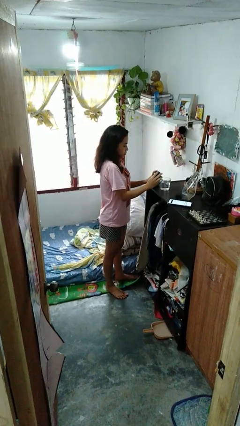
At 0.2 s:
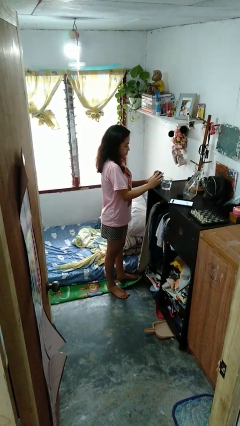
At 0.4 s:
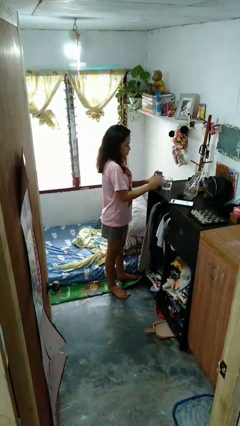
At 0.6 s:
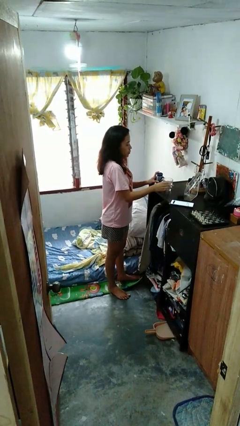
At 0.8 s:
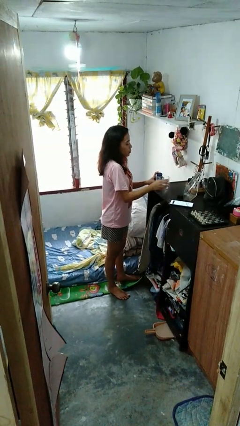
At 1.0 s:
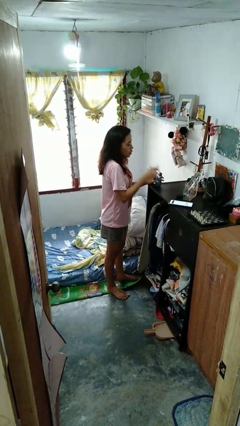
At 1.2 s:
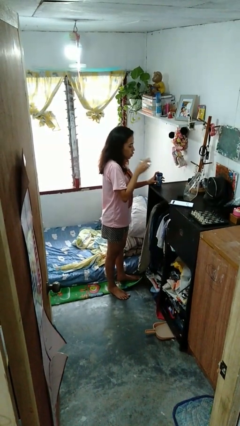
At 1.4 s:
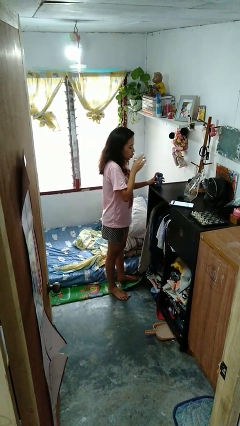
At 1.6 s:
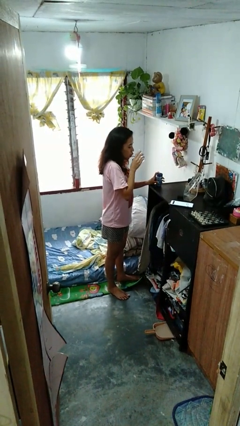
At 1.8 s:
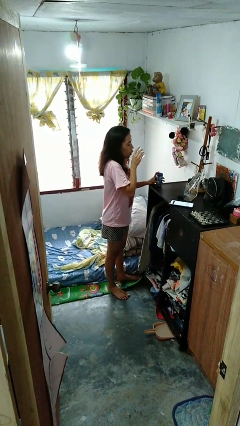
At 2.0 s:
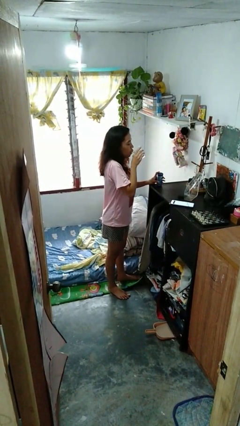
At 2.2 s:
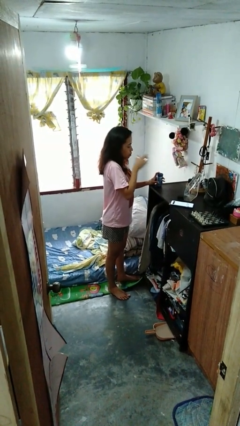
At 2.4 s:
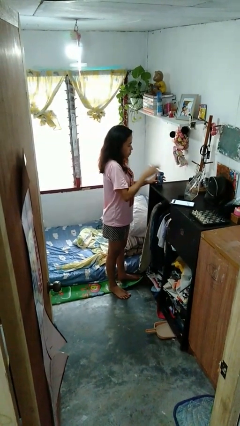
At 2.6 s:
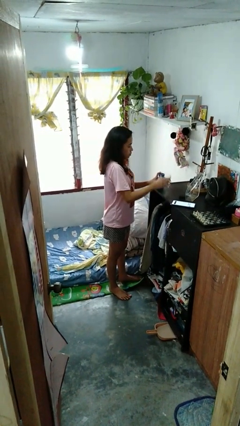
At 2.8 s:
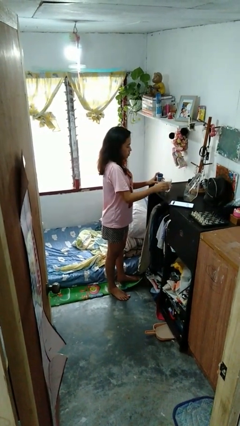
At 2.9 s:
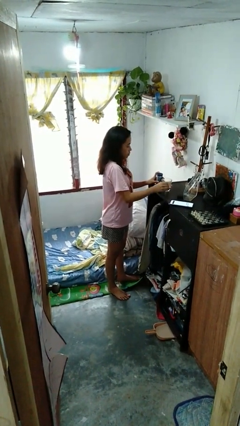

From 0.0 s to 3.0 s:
person drinks from cup

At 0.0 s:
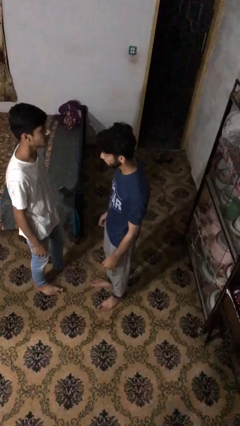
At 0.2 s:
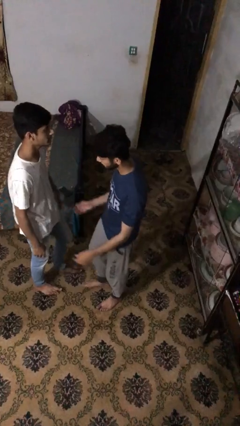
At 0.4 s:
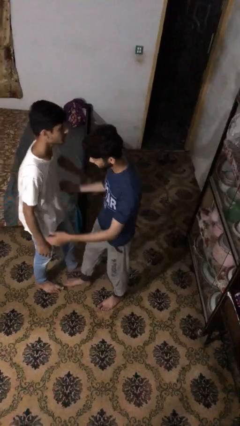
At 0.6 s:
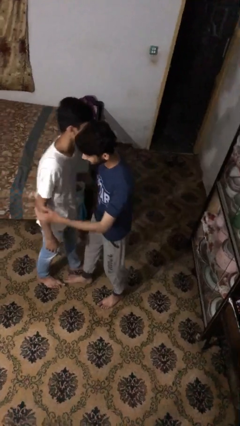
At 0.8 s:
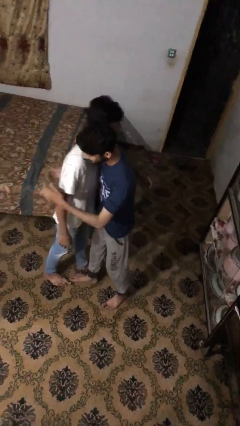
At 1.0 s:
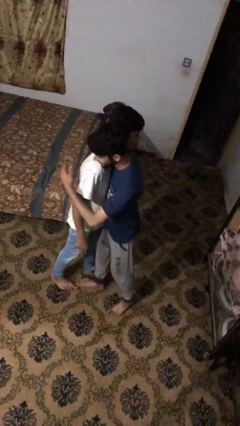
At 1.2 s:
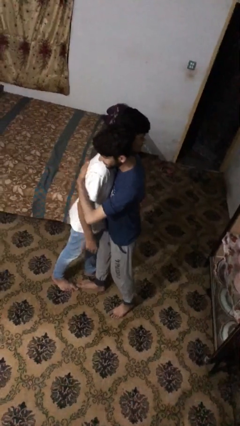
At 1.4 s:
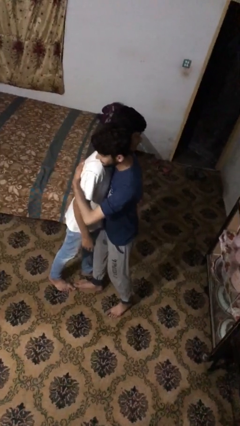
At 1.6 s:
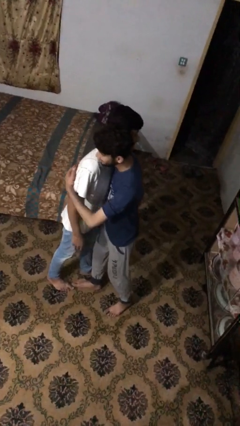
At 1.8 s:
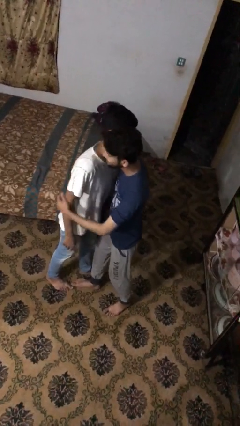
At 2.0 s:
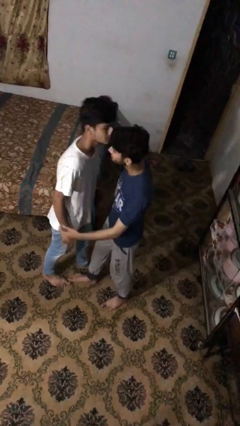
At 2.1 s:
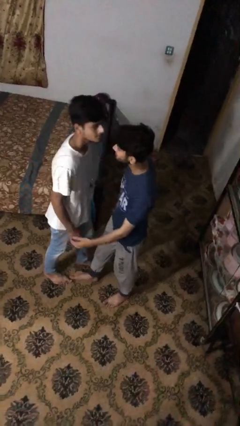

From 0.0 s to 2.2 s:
person embraces person

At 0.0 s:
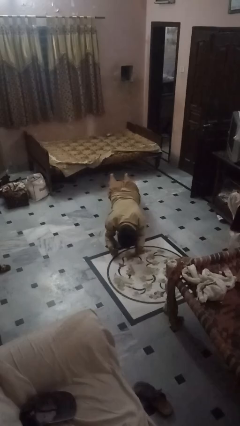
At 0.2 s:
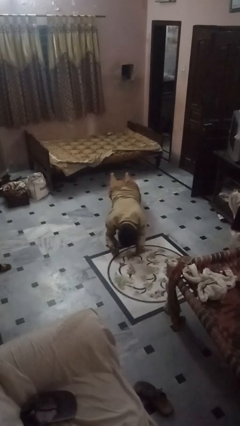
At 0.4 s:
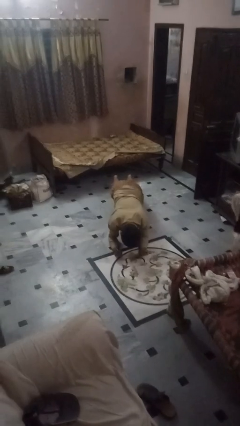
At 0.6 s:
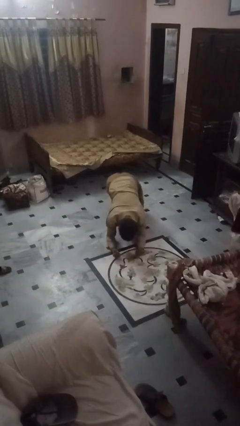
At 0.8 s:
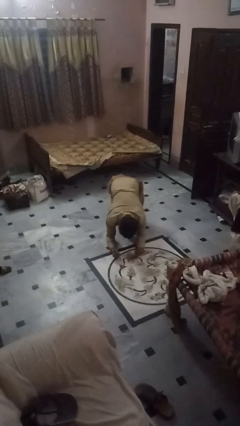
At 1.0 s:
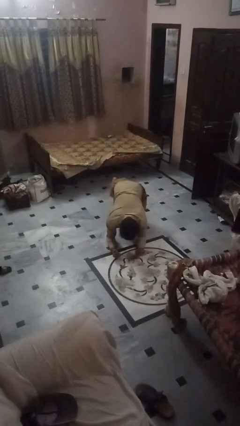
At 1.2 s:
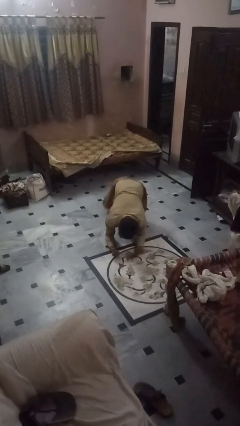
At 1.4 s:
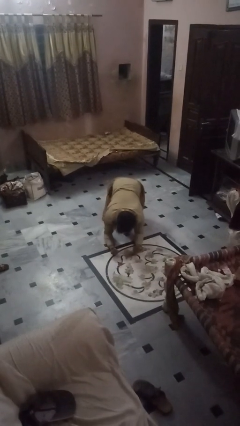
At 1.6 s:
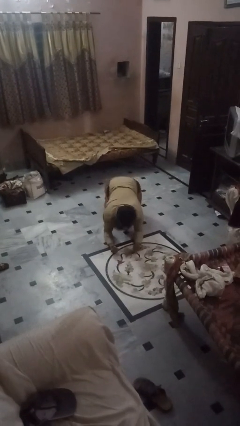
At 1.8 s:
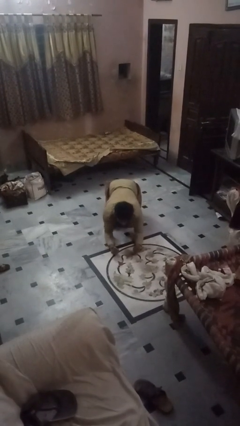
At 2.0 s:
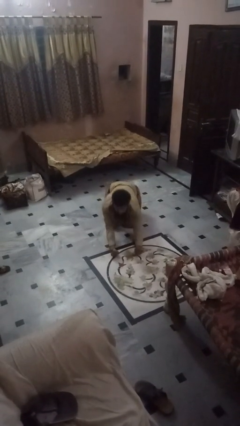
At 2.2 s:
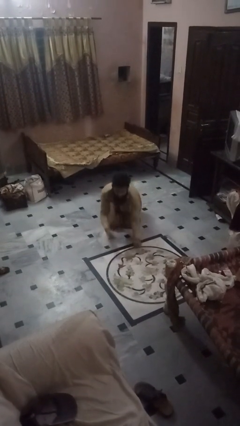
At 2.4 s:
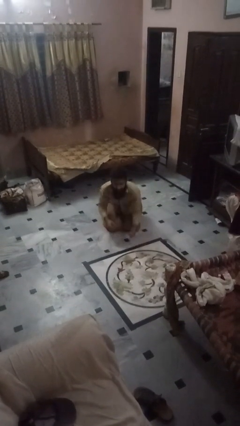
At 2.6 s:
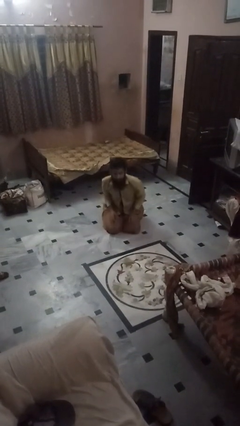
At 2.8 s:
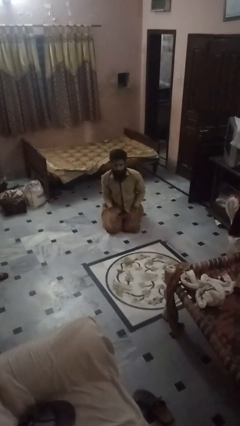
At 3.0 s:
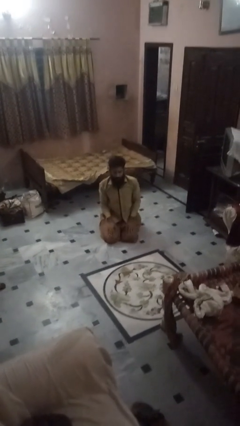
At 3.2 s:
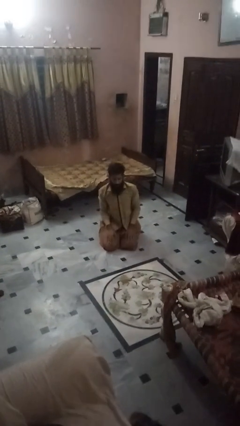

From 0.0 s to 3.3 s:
person stands up from floor

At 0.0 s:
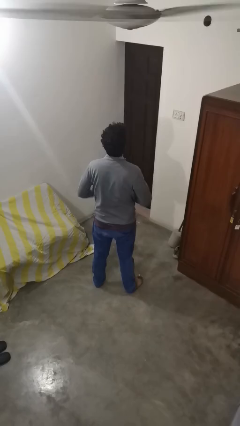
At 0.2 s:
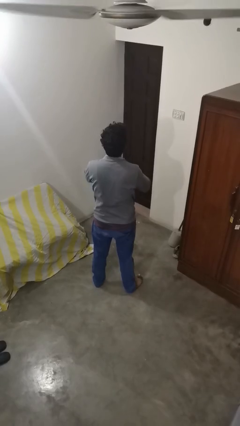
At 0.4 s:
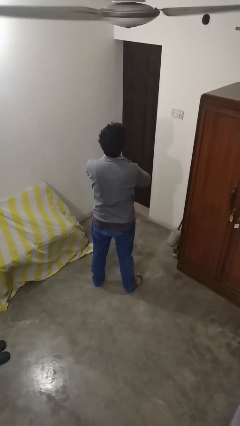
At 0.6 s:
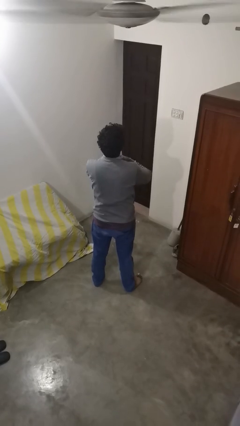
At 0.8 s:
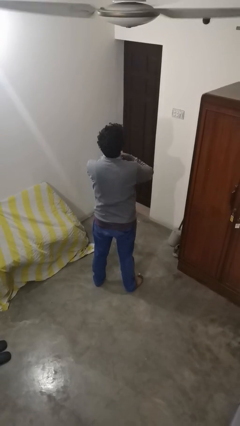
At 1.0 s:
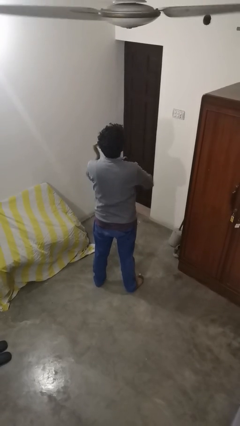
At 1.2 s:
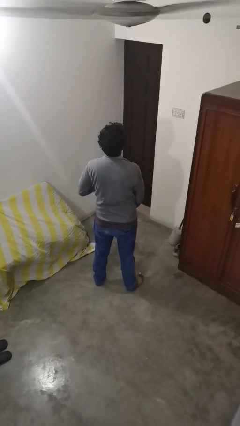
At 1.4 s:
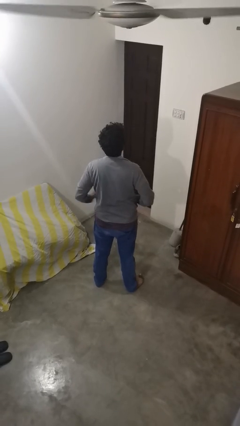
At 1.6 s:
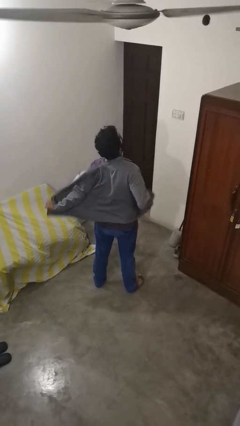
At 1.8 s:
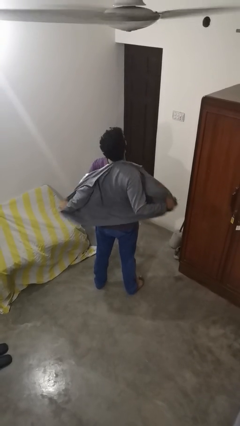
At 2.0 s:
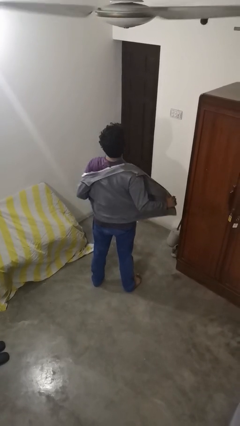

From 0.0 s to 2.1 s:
person unzips jacket

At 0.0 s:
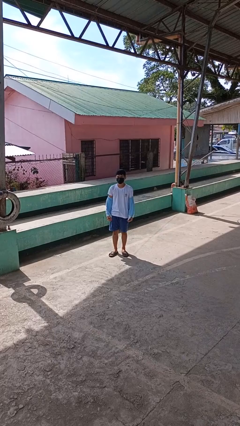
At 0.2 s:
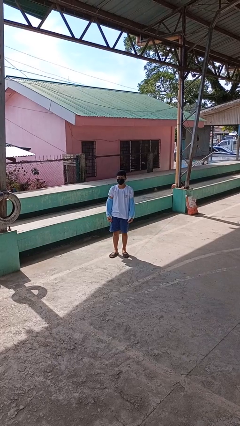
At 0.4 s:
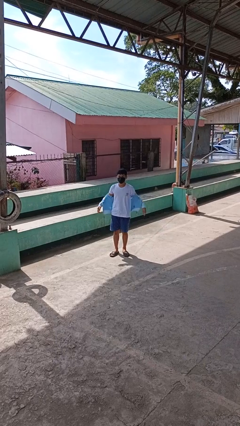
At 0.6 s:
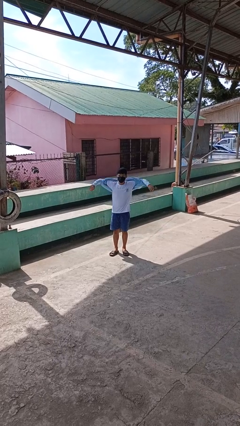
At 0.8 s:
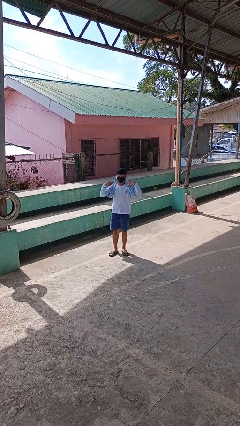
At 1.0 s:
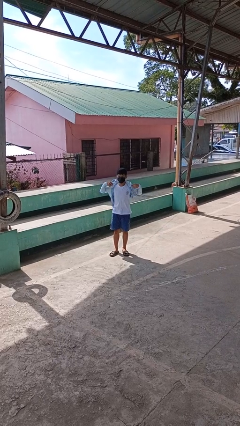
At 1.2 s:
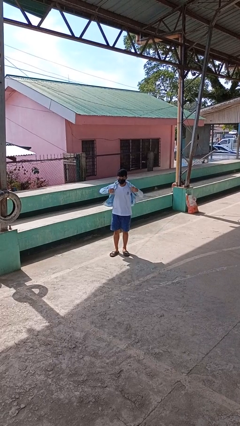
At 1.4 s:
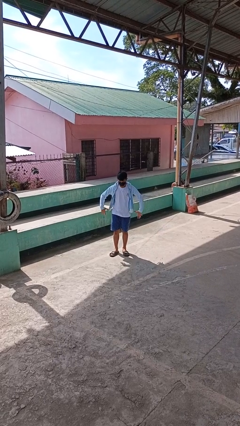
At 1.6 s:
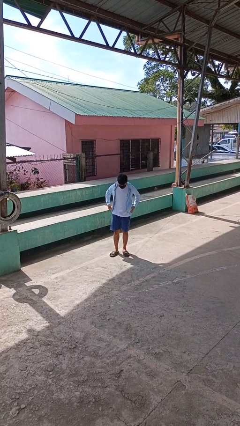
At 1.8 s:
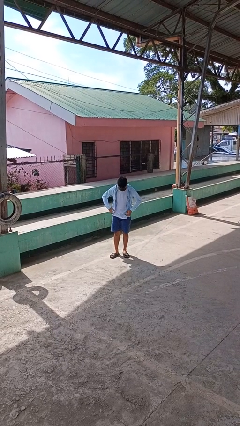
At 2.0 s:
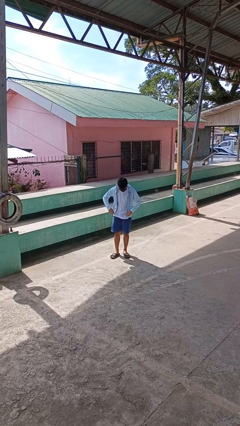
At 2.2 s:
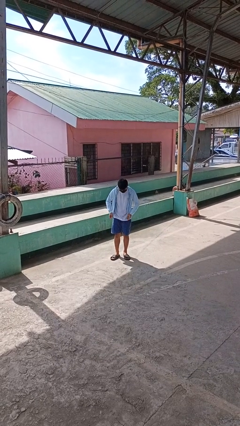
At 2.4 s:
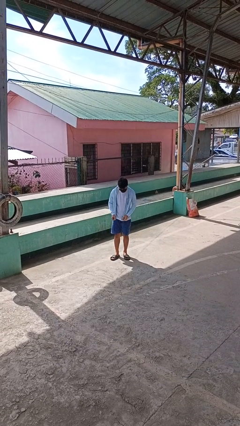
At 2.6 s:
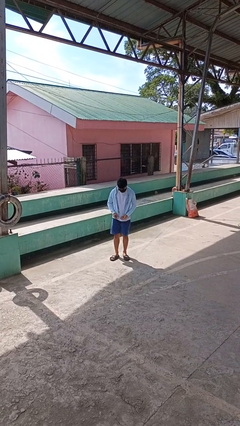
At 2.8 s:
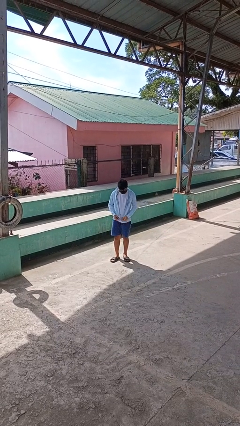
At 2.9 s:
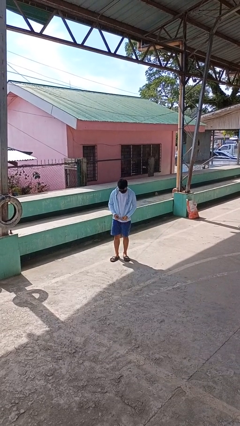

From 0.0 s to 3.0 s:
person puts on jacket

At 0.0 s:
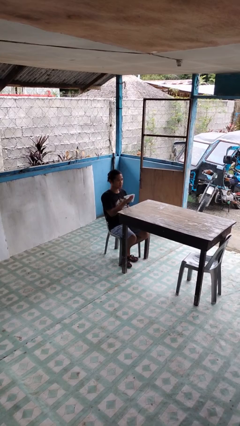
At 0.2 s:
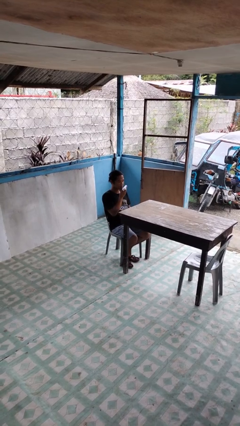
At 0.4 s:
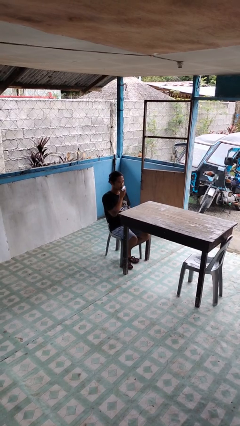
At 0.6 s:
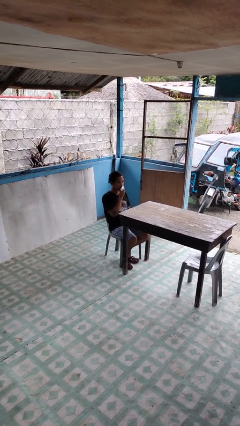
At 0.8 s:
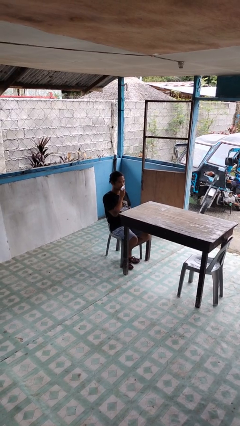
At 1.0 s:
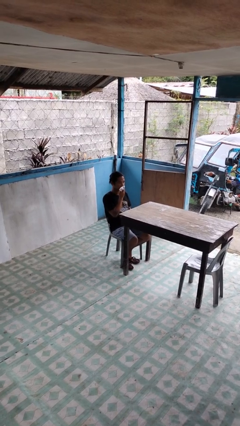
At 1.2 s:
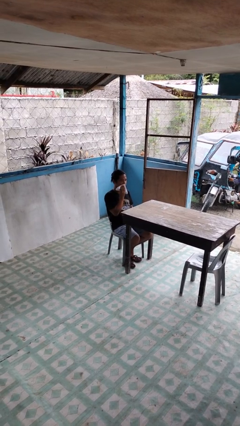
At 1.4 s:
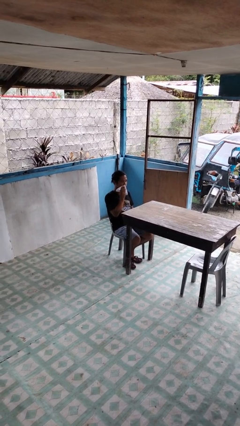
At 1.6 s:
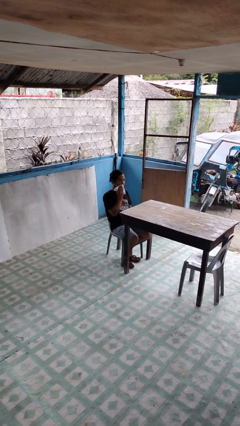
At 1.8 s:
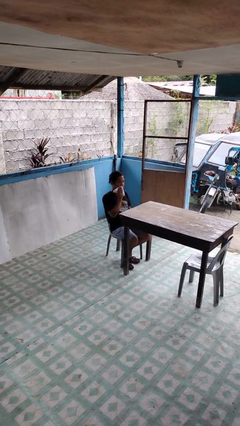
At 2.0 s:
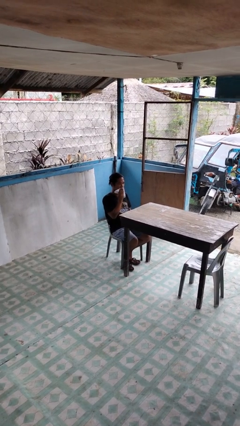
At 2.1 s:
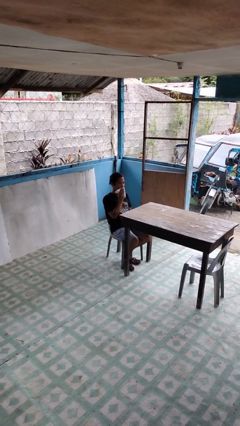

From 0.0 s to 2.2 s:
person wipes mouth with napkin

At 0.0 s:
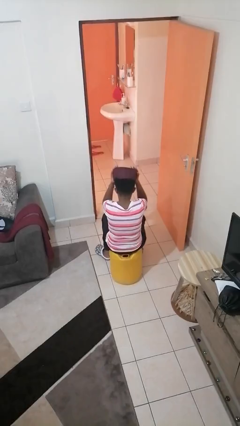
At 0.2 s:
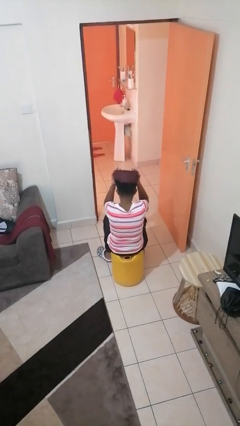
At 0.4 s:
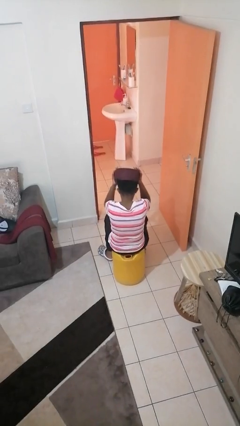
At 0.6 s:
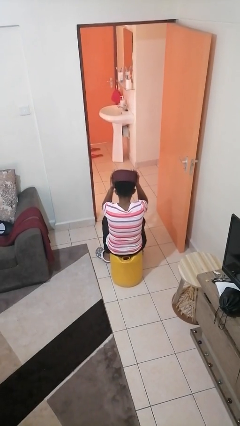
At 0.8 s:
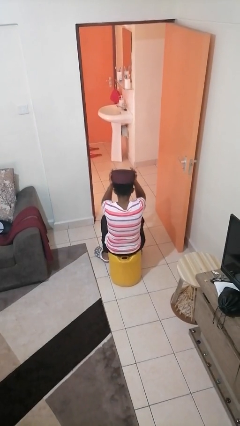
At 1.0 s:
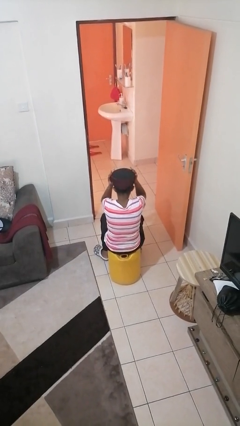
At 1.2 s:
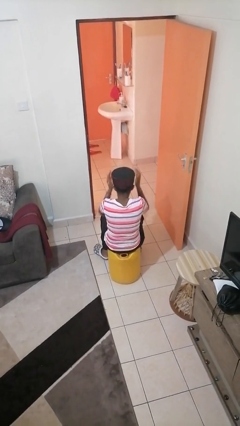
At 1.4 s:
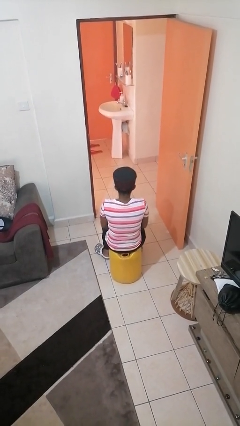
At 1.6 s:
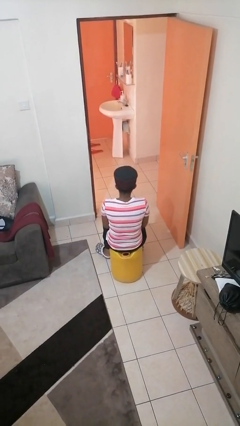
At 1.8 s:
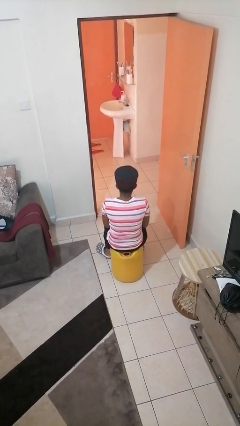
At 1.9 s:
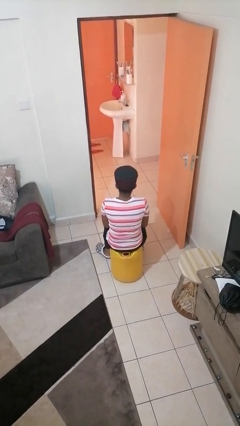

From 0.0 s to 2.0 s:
person puts on hat
